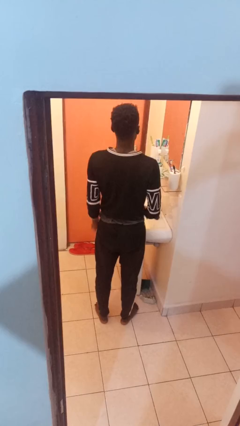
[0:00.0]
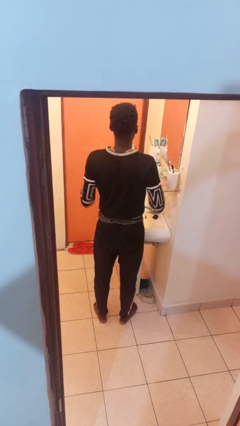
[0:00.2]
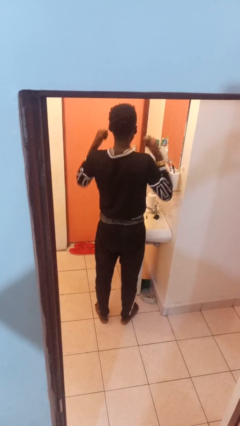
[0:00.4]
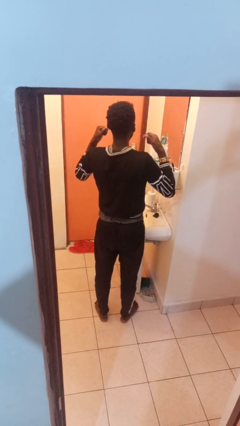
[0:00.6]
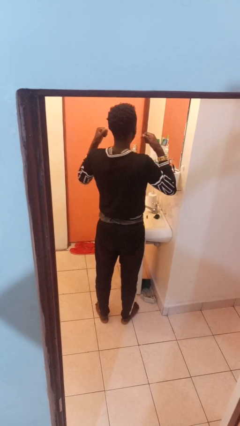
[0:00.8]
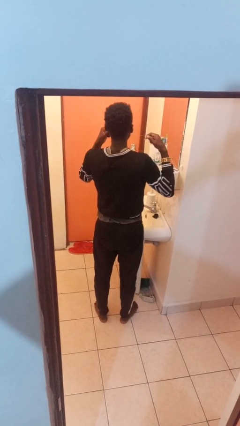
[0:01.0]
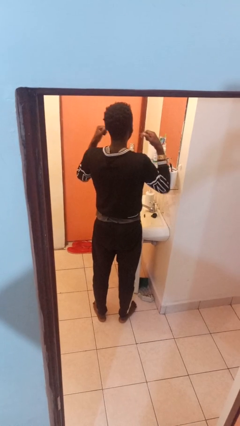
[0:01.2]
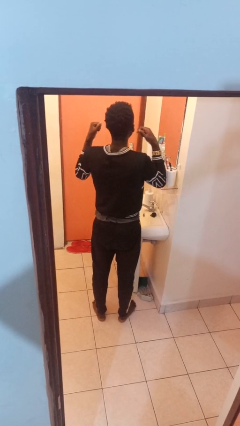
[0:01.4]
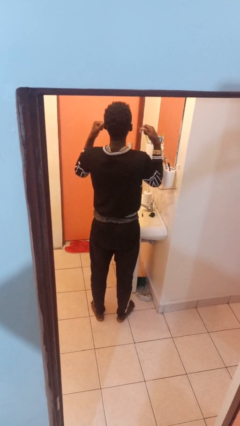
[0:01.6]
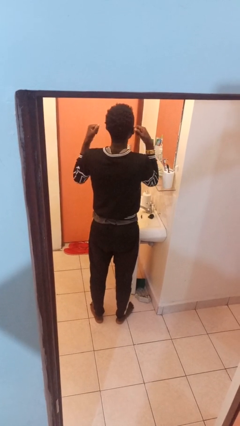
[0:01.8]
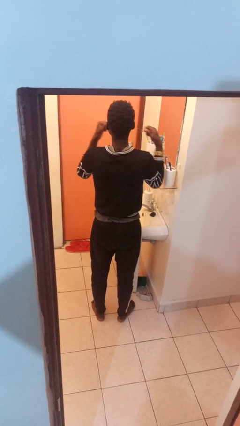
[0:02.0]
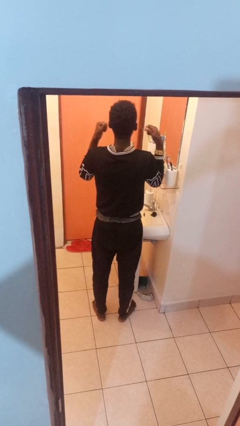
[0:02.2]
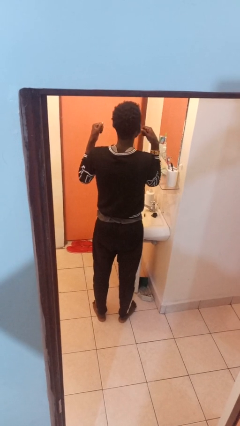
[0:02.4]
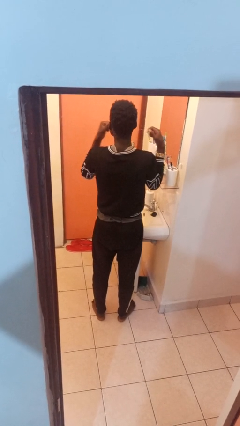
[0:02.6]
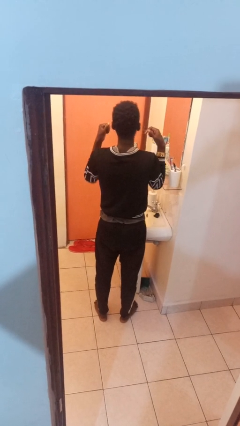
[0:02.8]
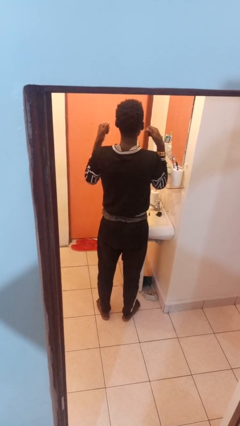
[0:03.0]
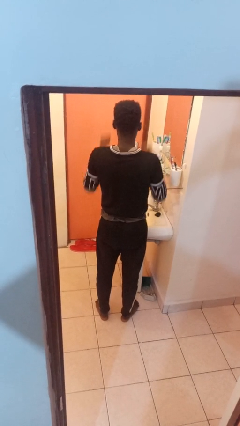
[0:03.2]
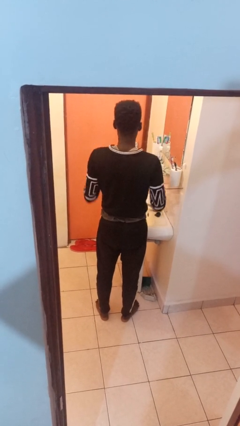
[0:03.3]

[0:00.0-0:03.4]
person flosses

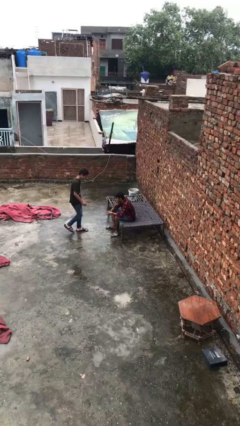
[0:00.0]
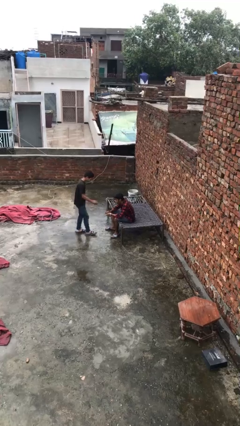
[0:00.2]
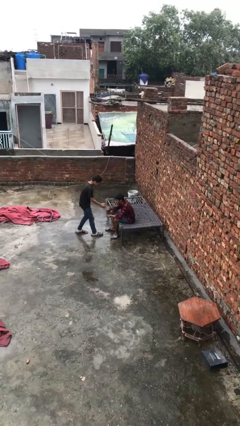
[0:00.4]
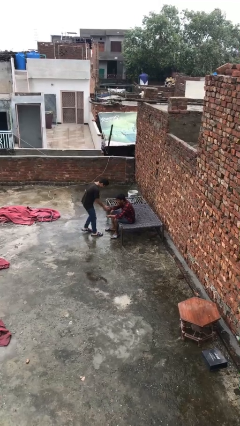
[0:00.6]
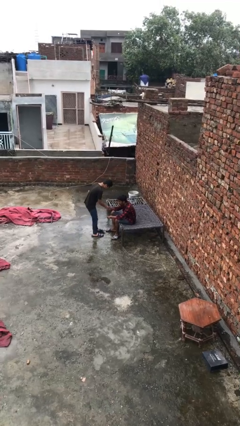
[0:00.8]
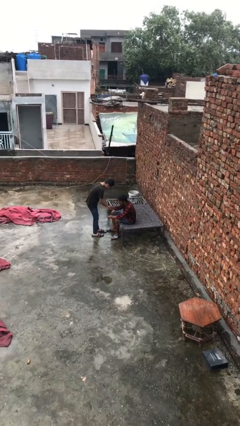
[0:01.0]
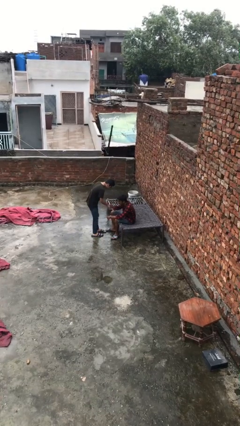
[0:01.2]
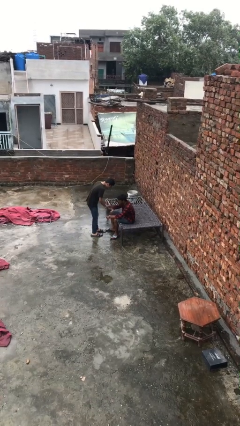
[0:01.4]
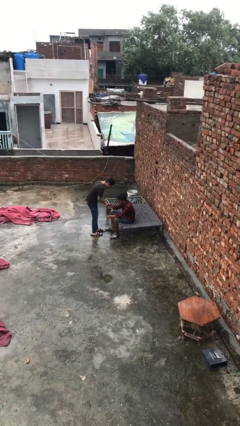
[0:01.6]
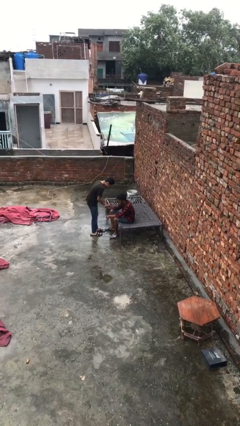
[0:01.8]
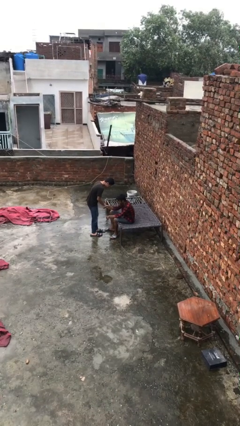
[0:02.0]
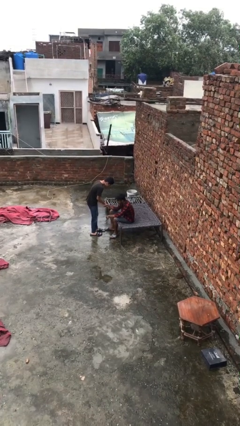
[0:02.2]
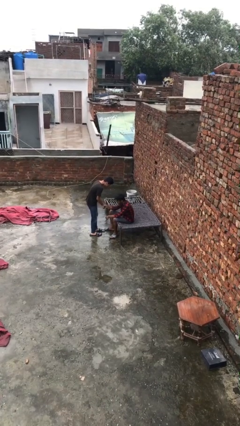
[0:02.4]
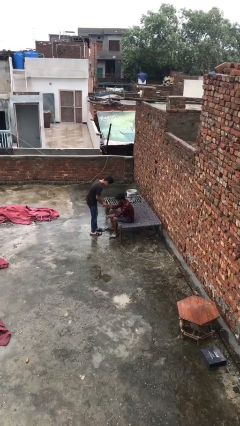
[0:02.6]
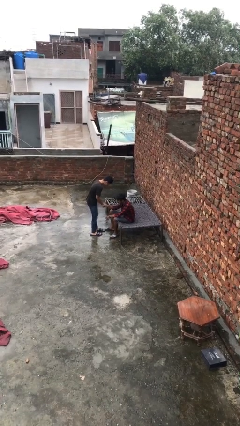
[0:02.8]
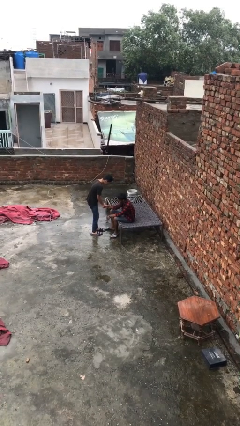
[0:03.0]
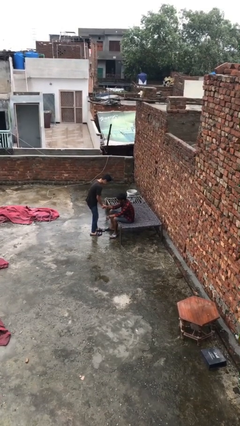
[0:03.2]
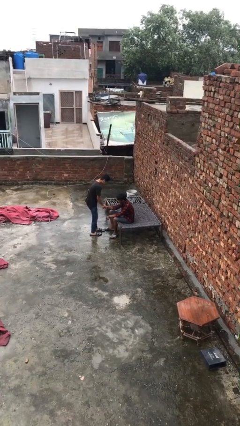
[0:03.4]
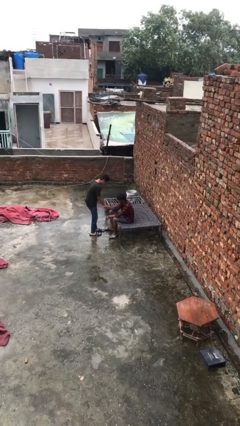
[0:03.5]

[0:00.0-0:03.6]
person shakes hand

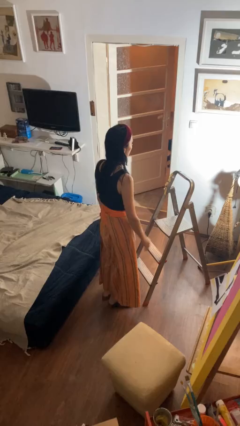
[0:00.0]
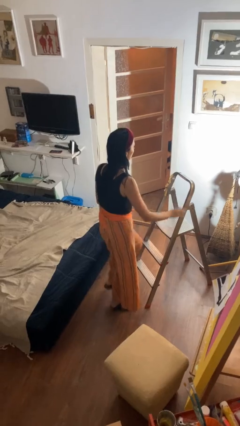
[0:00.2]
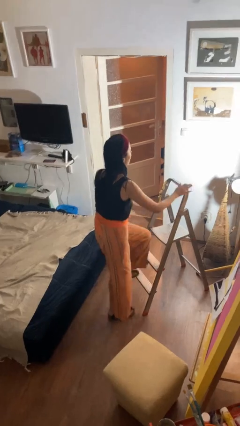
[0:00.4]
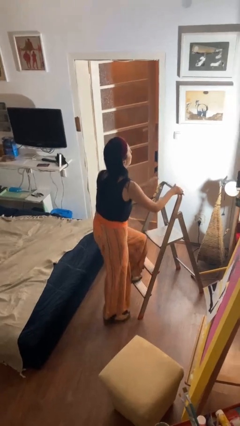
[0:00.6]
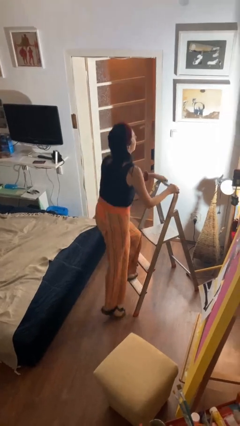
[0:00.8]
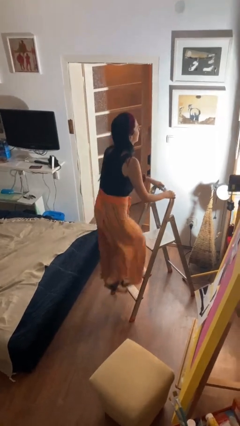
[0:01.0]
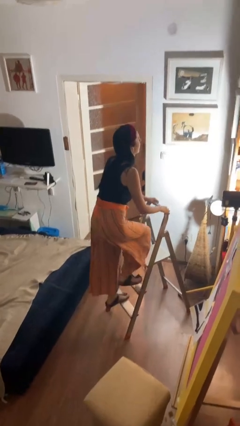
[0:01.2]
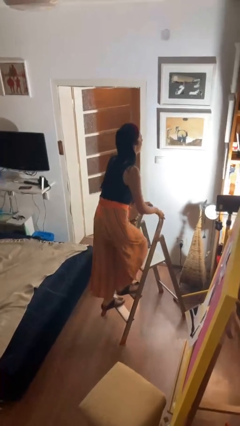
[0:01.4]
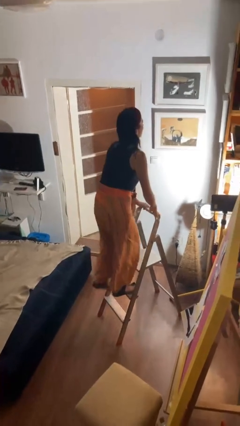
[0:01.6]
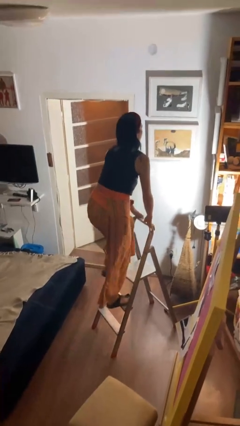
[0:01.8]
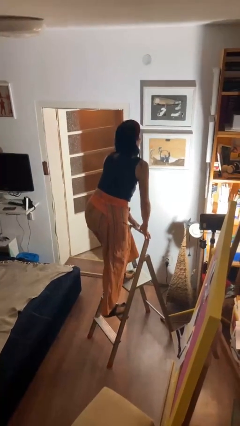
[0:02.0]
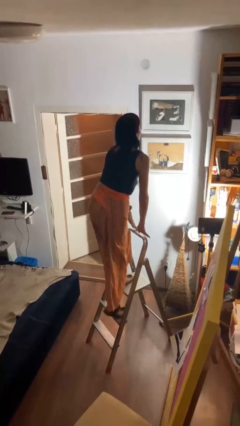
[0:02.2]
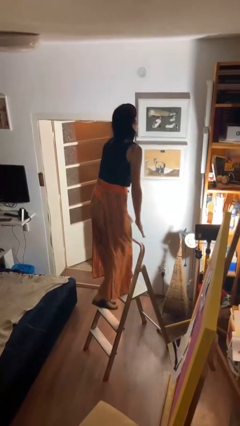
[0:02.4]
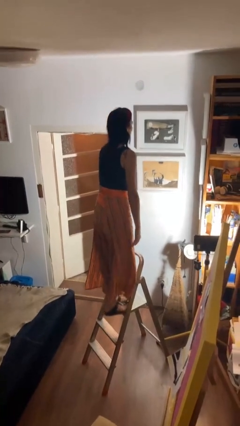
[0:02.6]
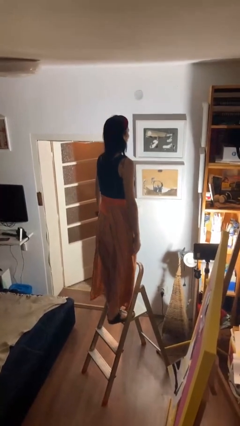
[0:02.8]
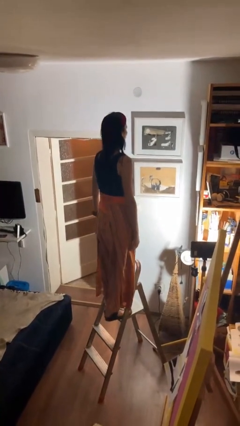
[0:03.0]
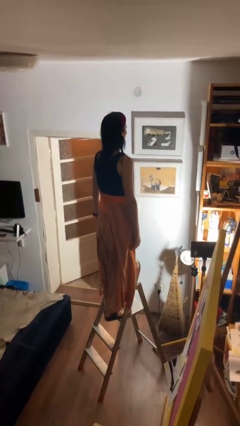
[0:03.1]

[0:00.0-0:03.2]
person climbs up ladder

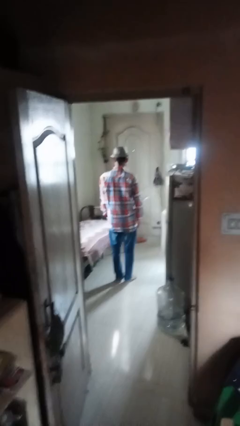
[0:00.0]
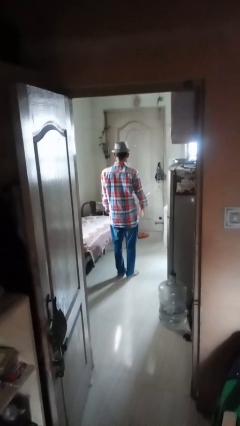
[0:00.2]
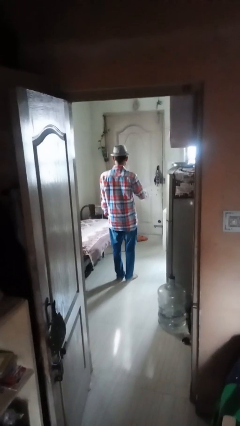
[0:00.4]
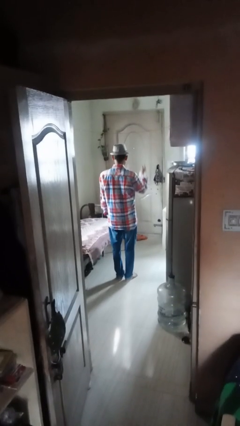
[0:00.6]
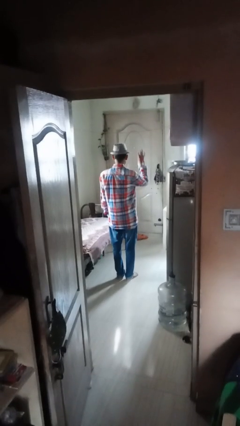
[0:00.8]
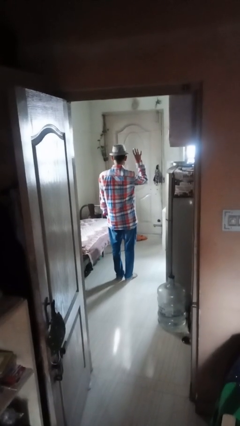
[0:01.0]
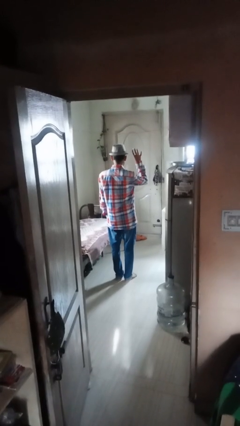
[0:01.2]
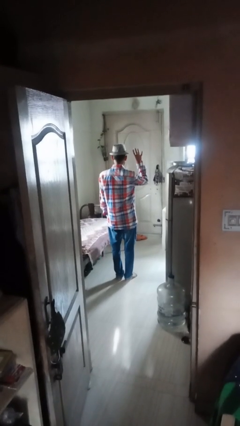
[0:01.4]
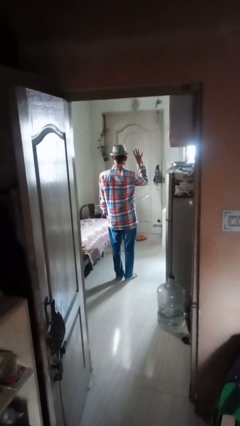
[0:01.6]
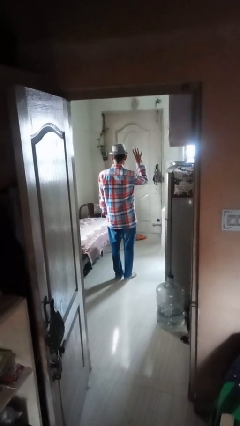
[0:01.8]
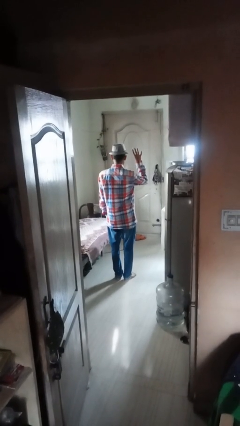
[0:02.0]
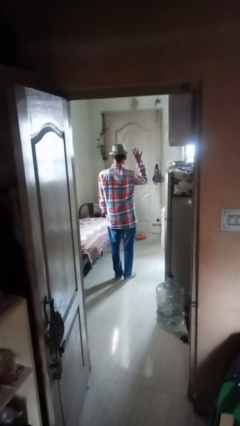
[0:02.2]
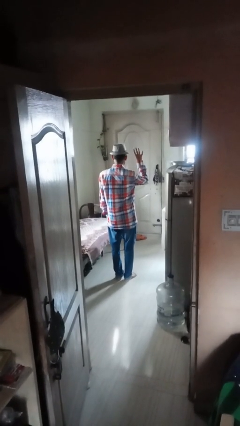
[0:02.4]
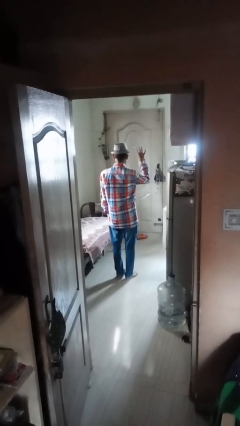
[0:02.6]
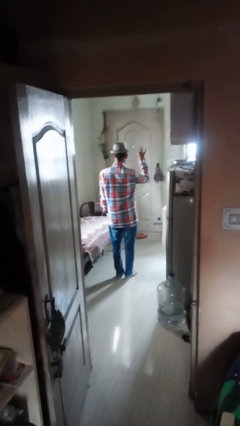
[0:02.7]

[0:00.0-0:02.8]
person gestures number four

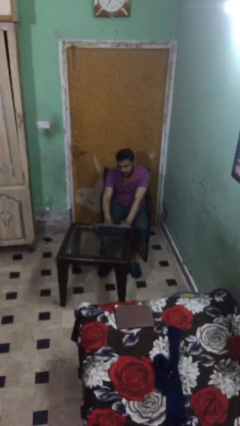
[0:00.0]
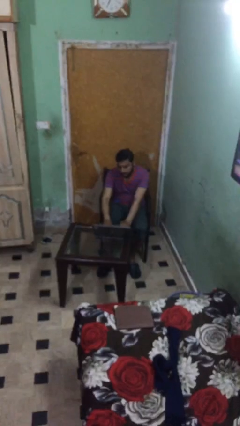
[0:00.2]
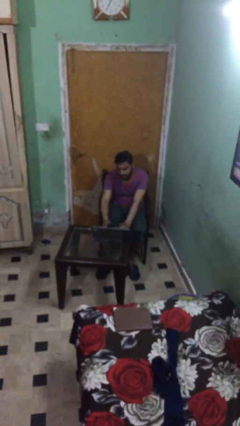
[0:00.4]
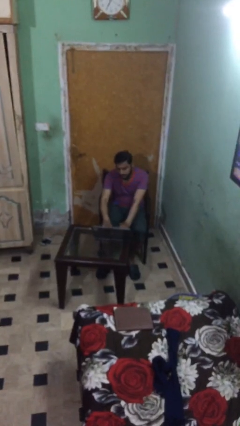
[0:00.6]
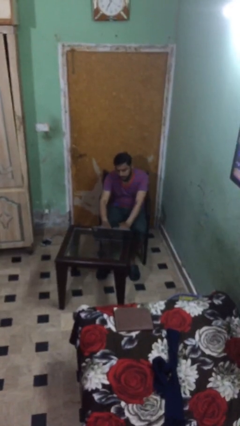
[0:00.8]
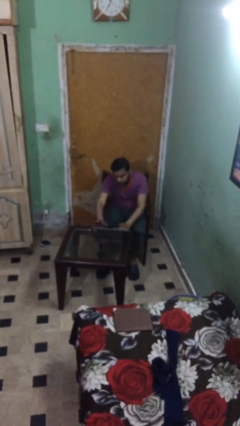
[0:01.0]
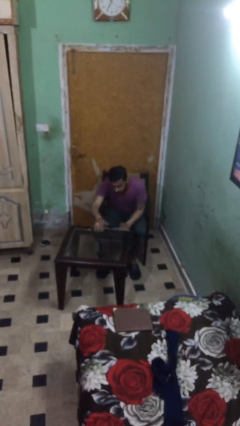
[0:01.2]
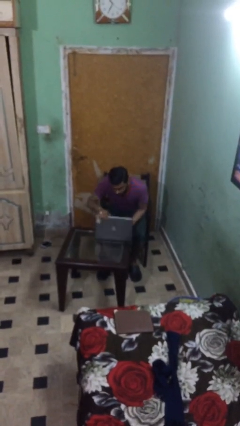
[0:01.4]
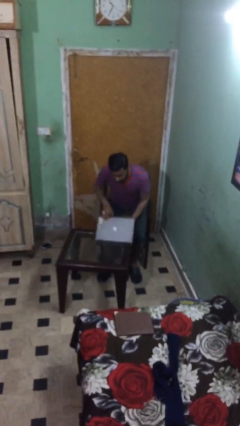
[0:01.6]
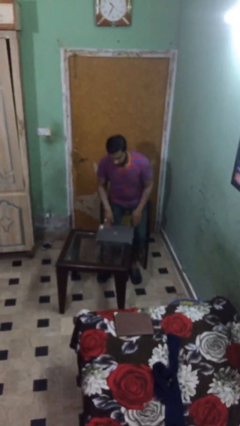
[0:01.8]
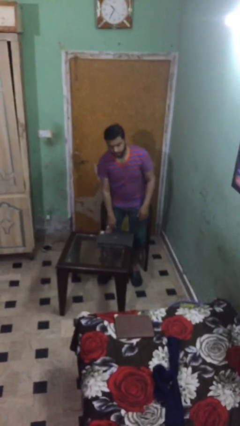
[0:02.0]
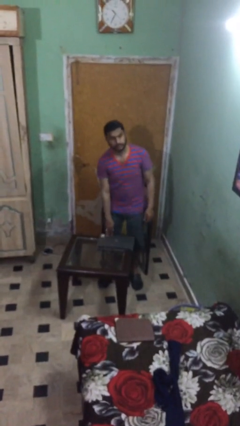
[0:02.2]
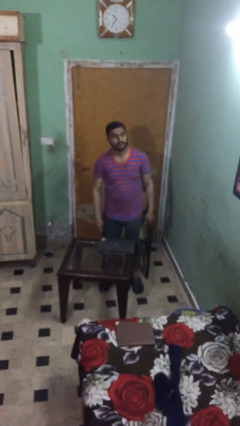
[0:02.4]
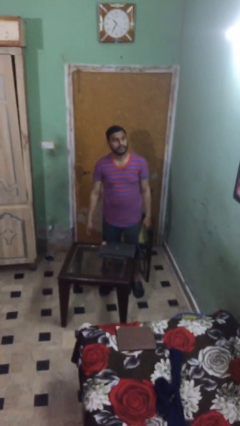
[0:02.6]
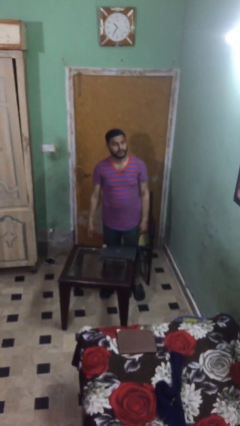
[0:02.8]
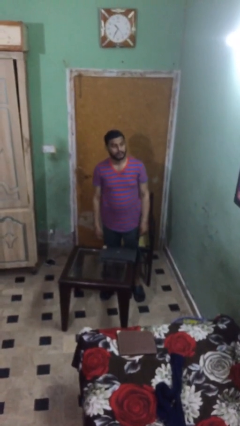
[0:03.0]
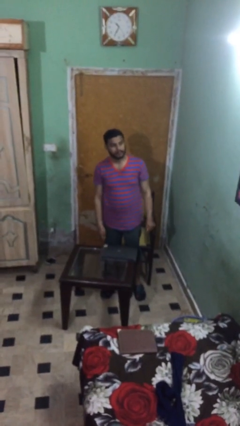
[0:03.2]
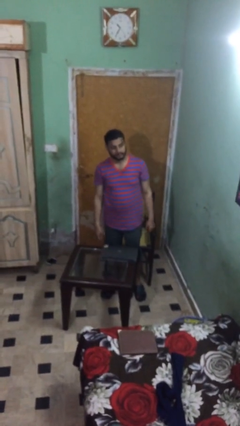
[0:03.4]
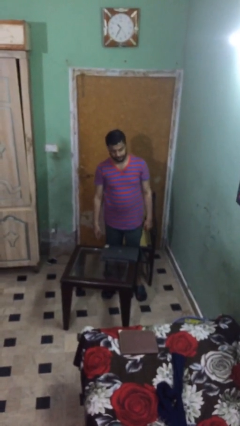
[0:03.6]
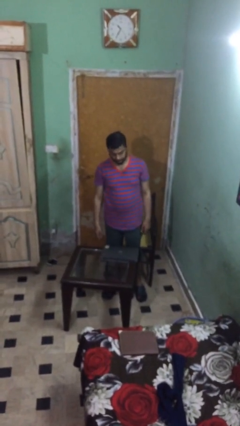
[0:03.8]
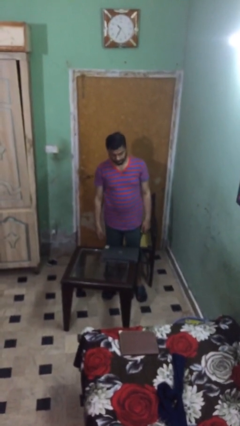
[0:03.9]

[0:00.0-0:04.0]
person stands up

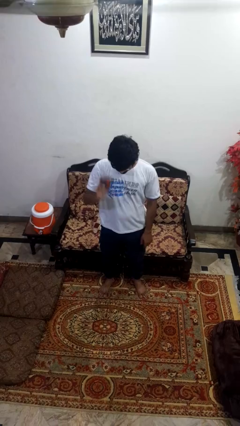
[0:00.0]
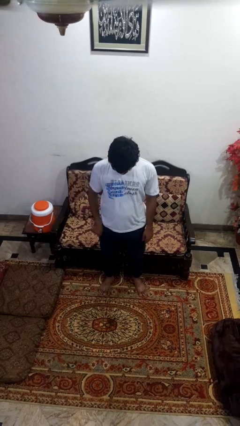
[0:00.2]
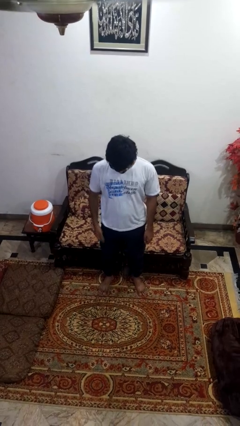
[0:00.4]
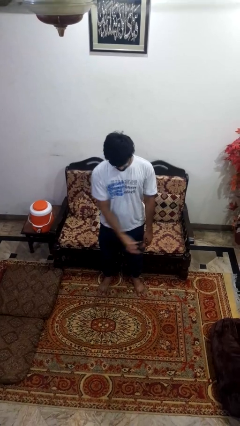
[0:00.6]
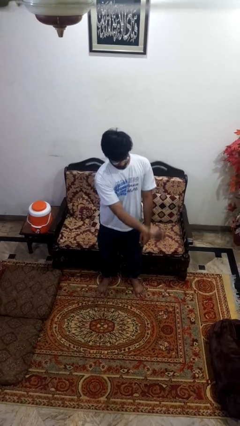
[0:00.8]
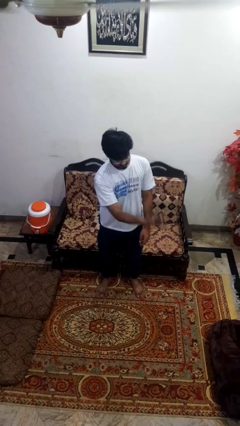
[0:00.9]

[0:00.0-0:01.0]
person bounces ball on floor
